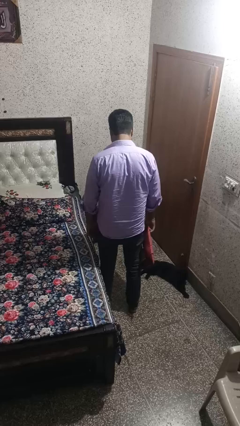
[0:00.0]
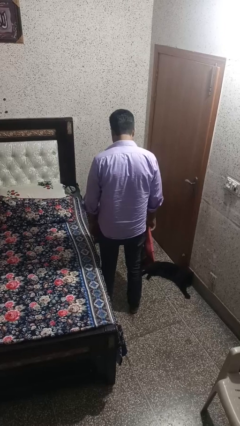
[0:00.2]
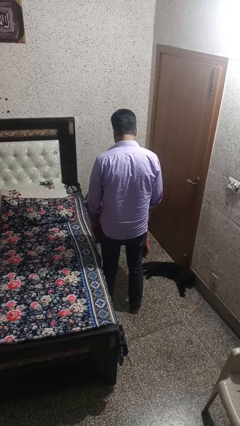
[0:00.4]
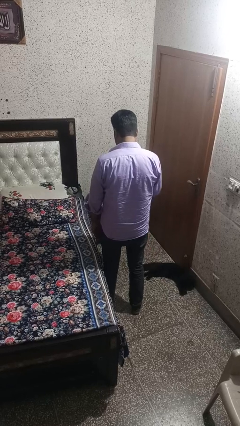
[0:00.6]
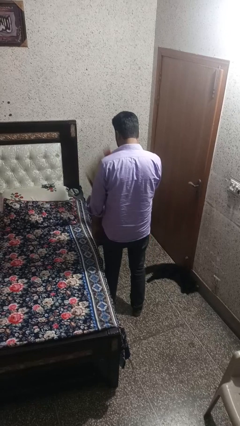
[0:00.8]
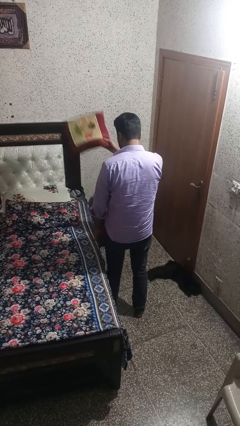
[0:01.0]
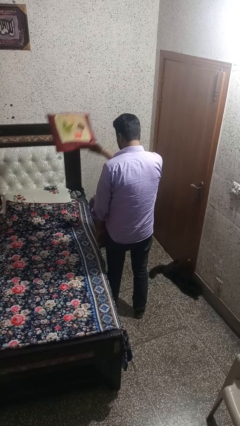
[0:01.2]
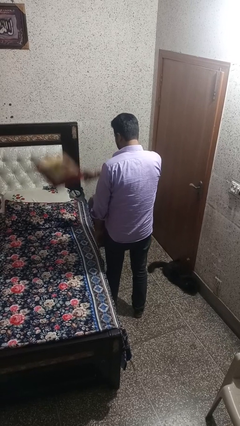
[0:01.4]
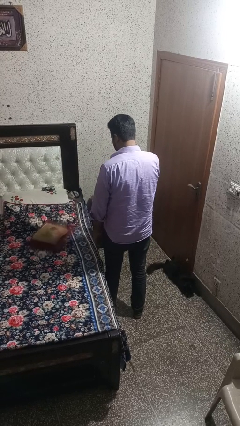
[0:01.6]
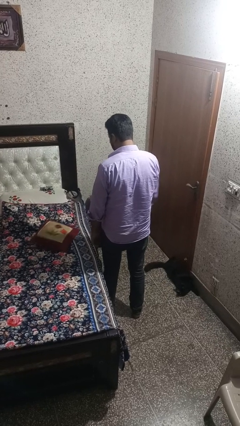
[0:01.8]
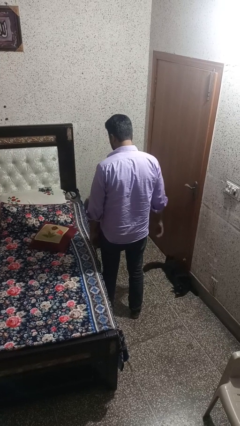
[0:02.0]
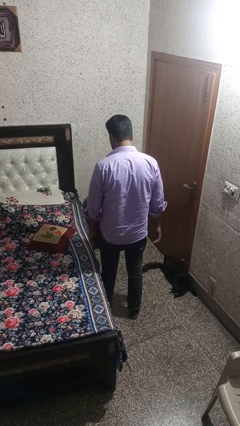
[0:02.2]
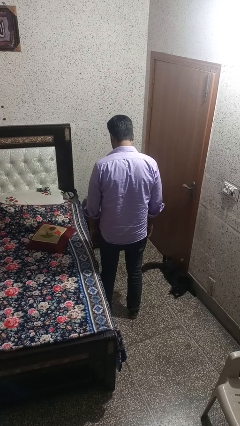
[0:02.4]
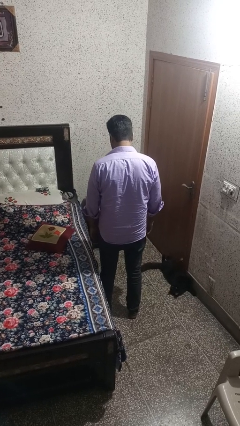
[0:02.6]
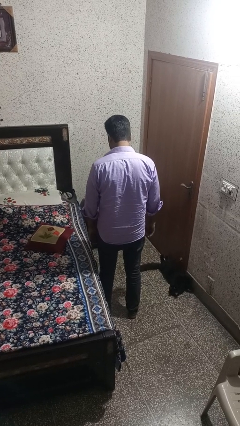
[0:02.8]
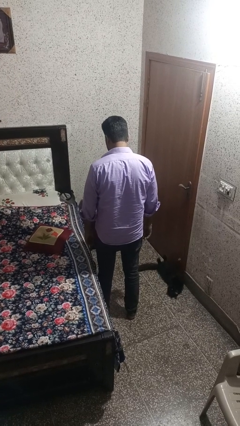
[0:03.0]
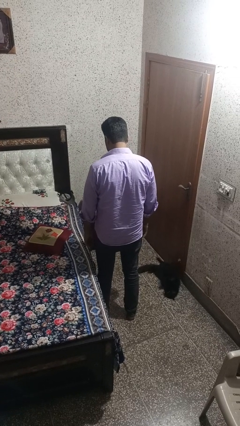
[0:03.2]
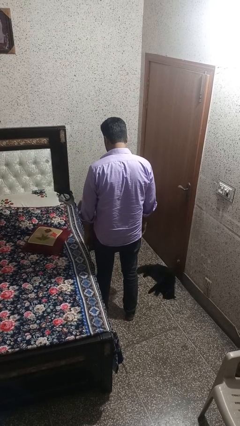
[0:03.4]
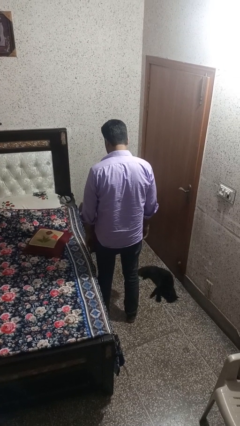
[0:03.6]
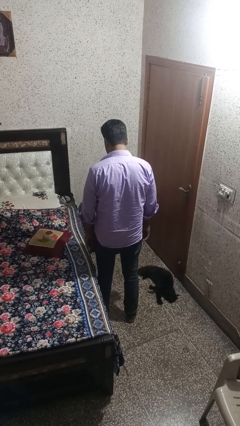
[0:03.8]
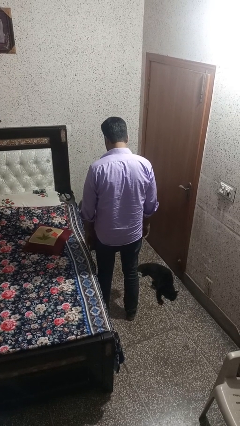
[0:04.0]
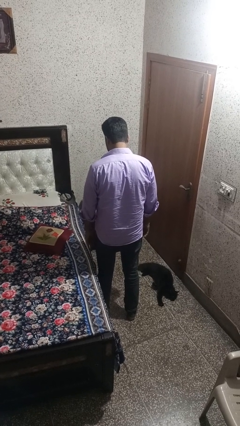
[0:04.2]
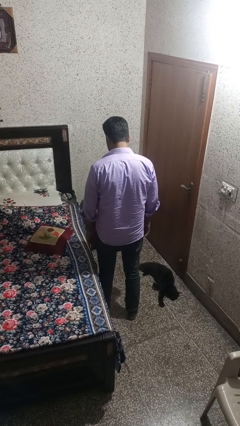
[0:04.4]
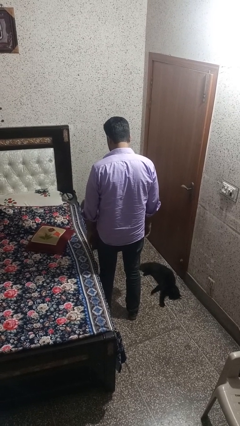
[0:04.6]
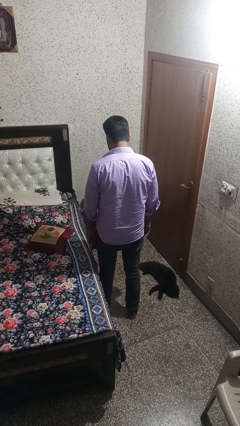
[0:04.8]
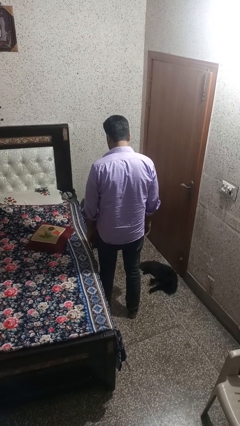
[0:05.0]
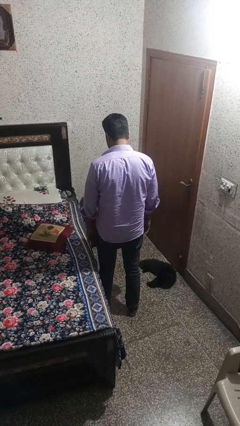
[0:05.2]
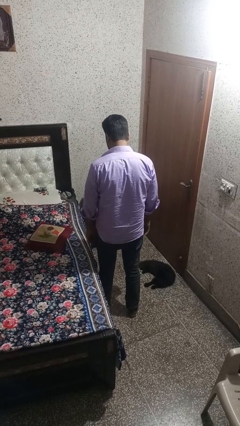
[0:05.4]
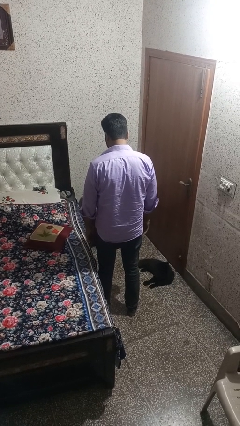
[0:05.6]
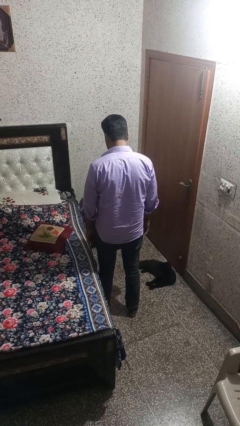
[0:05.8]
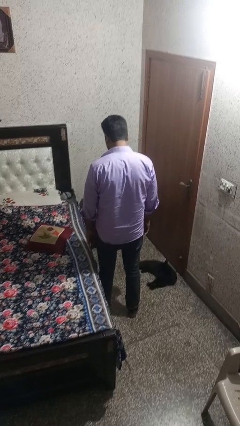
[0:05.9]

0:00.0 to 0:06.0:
person throws object on bed

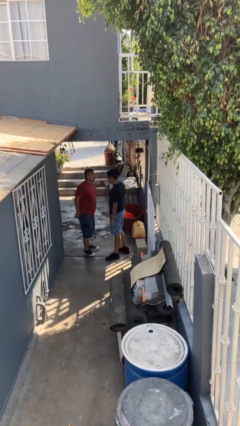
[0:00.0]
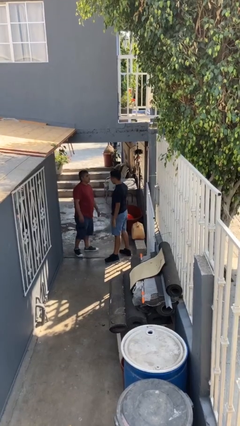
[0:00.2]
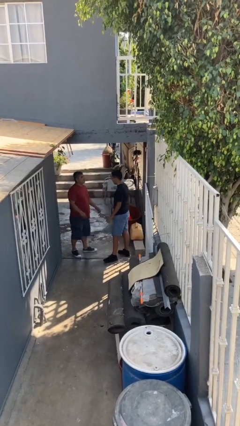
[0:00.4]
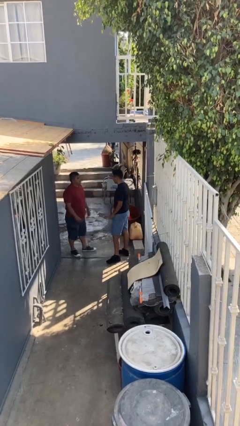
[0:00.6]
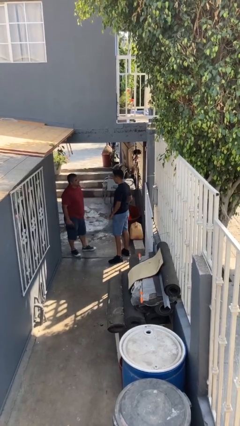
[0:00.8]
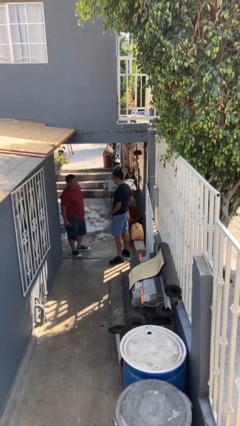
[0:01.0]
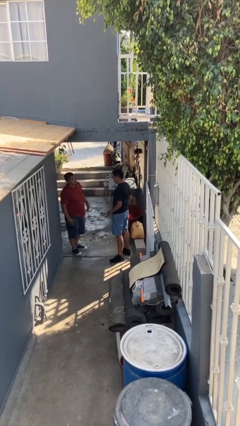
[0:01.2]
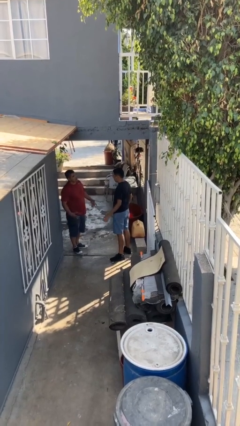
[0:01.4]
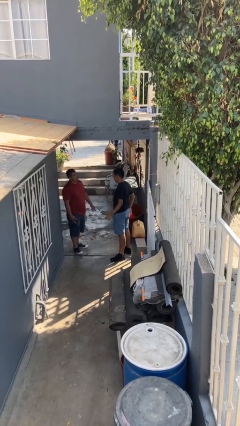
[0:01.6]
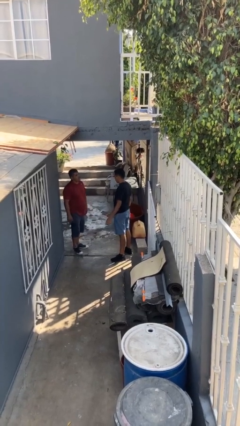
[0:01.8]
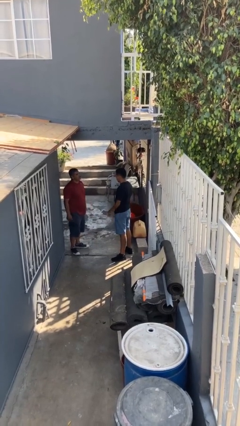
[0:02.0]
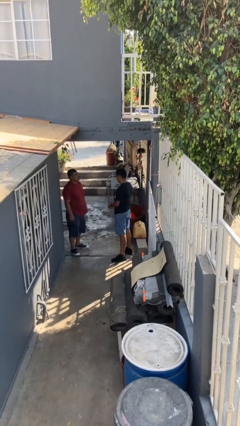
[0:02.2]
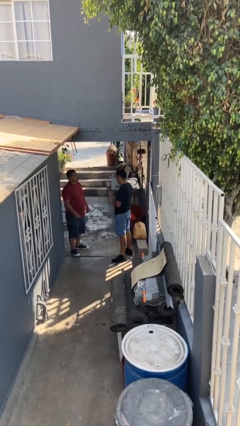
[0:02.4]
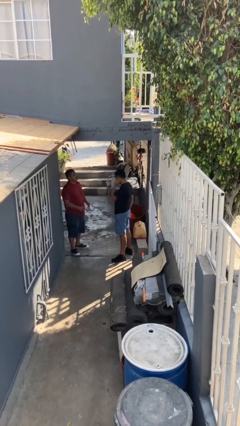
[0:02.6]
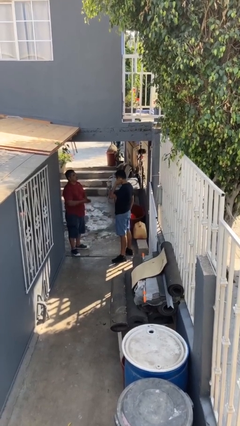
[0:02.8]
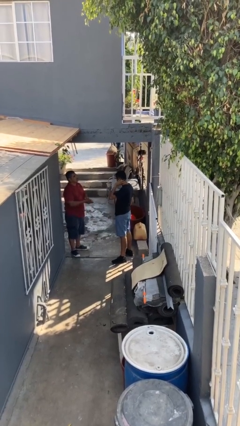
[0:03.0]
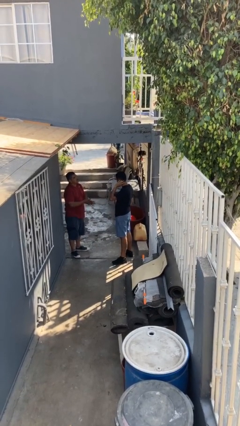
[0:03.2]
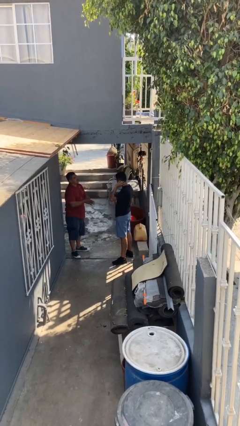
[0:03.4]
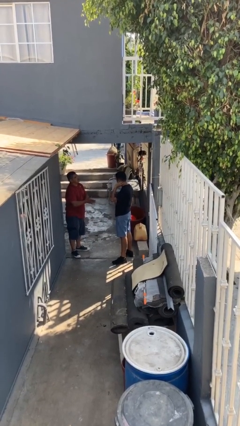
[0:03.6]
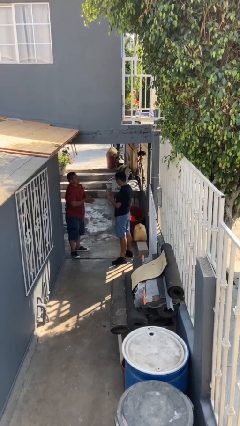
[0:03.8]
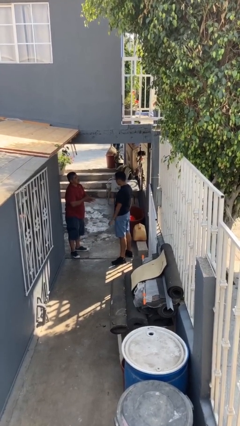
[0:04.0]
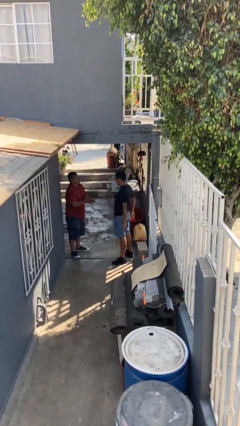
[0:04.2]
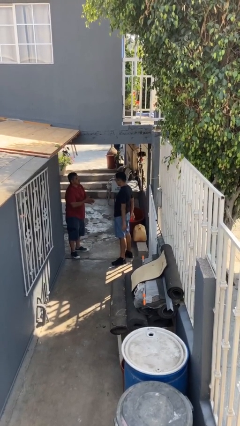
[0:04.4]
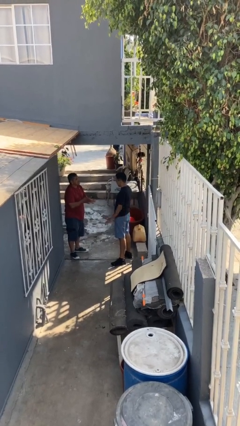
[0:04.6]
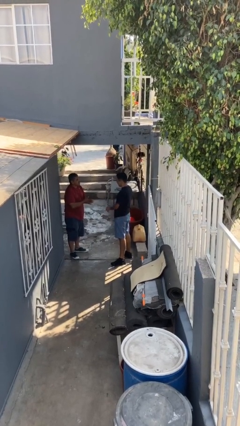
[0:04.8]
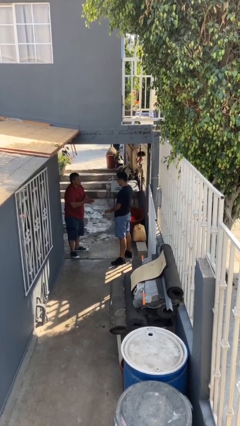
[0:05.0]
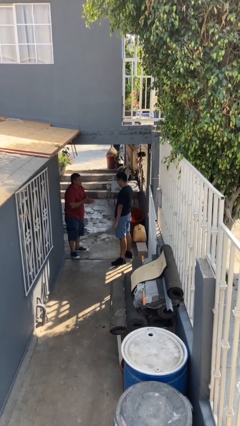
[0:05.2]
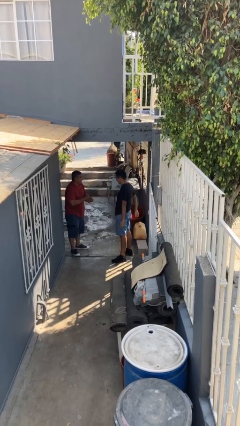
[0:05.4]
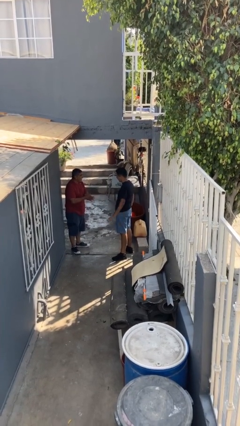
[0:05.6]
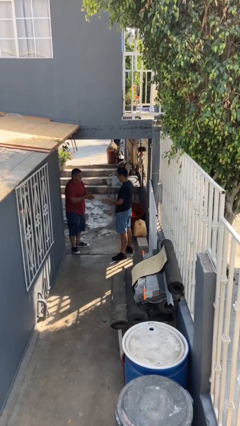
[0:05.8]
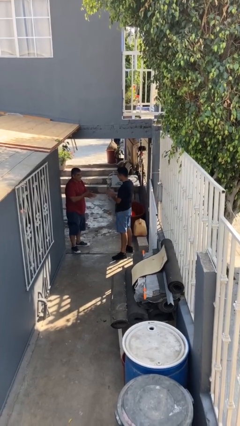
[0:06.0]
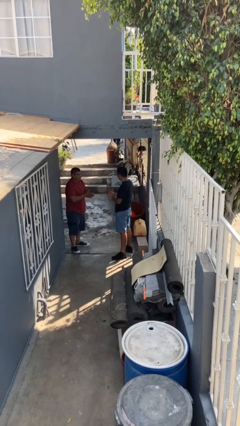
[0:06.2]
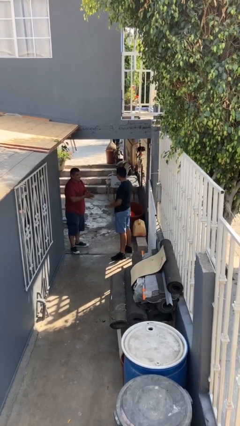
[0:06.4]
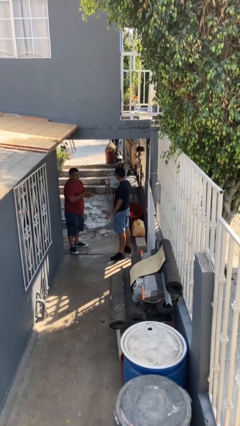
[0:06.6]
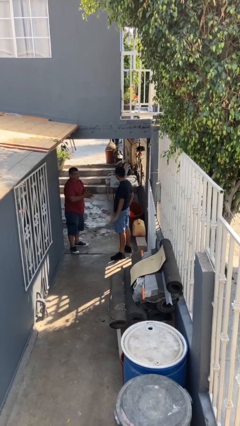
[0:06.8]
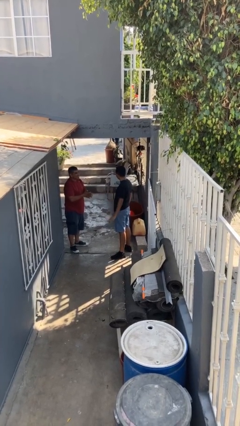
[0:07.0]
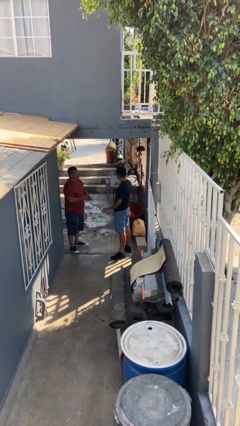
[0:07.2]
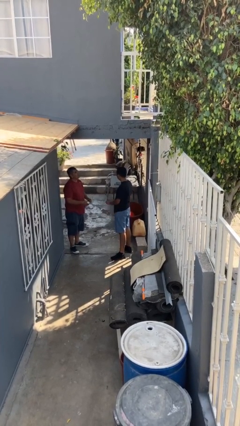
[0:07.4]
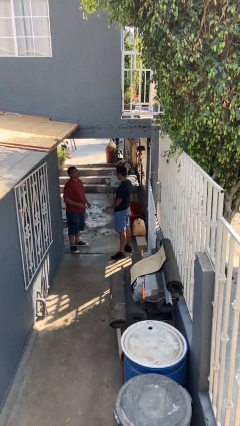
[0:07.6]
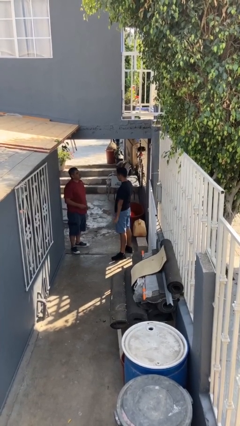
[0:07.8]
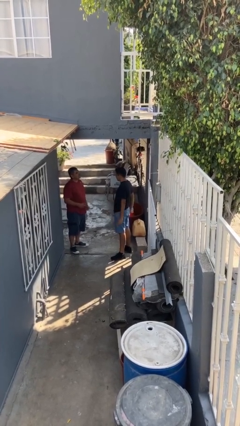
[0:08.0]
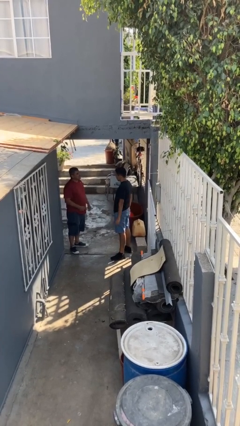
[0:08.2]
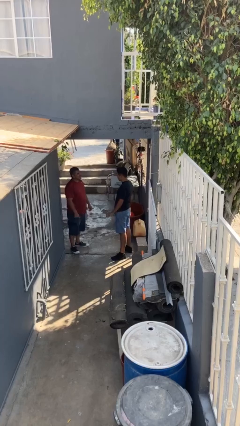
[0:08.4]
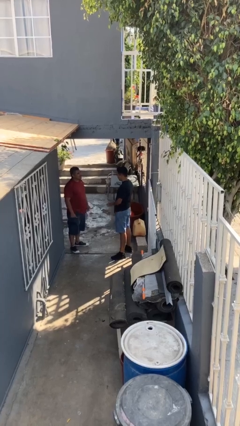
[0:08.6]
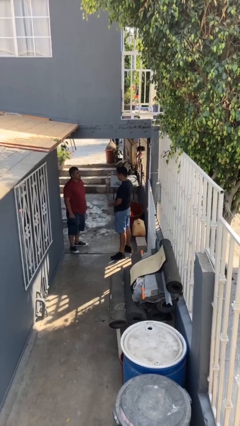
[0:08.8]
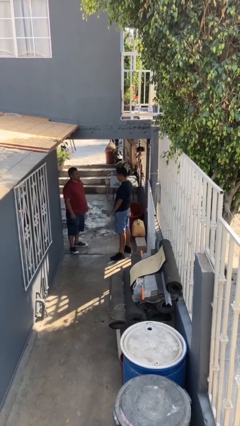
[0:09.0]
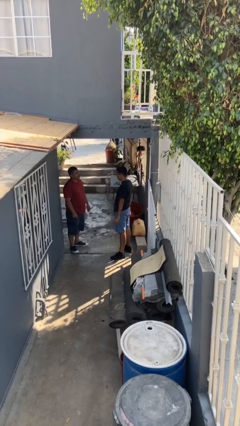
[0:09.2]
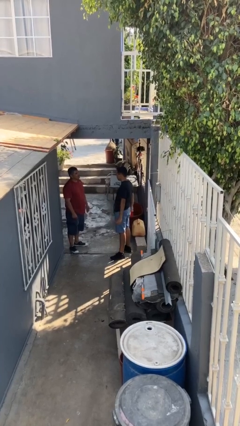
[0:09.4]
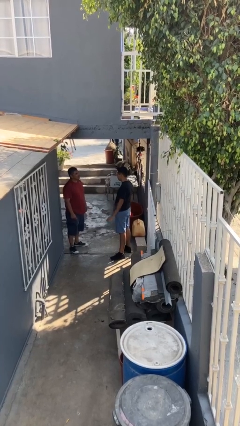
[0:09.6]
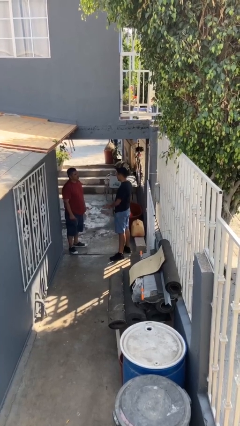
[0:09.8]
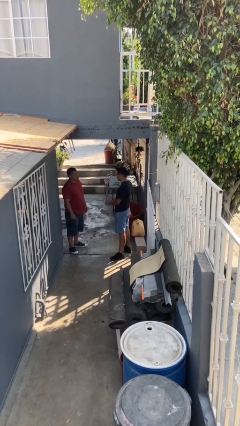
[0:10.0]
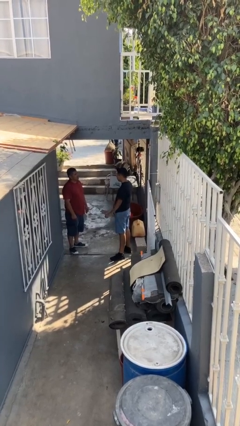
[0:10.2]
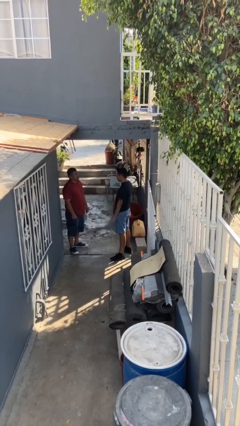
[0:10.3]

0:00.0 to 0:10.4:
person talks to person

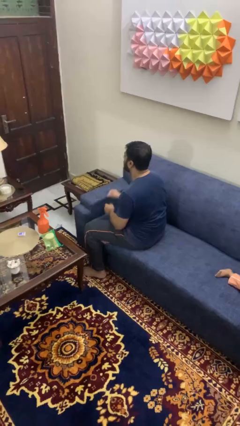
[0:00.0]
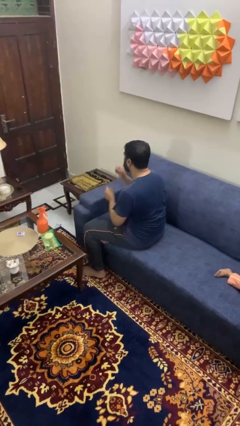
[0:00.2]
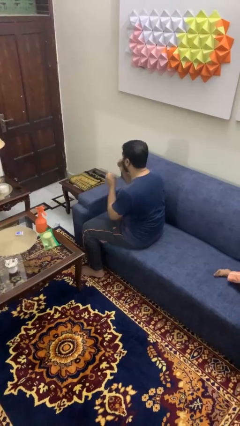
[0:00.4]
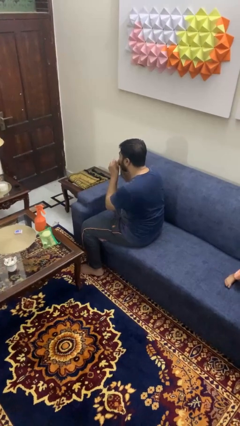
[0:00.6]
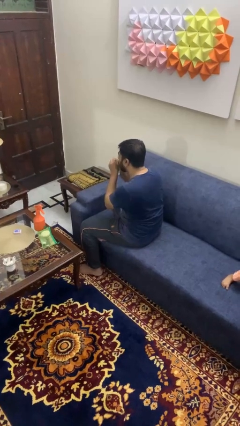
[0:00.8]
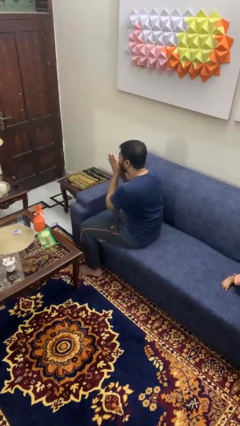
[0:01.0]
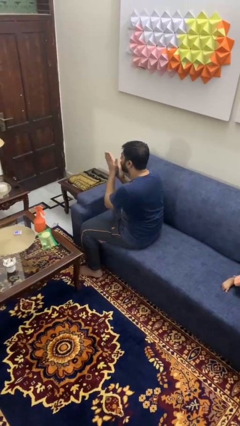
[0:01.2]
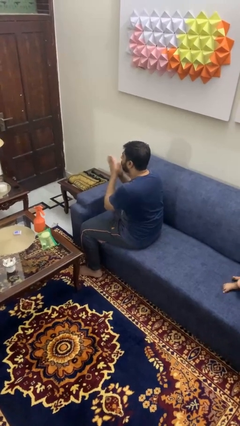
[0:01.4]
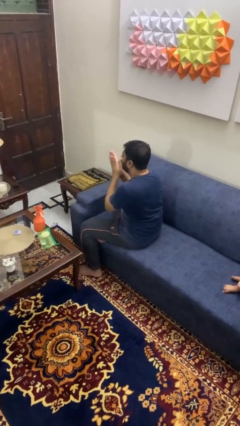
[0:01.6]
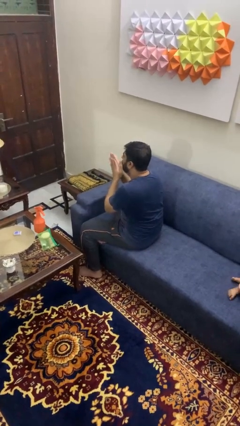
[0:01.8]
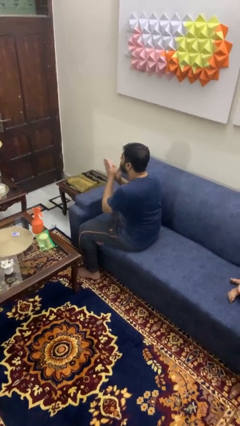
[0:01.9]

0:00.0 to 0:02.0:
person blows into hands
